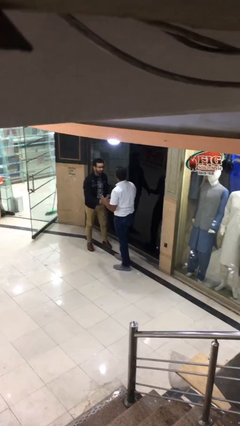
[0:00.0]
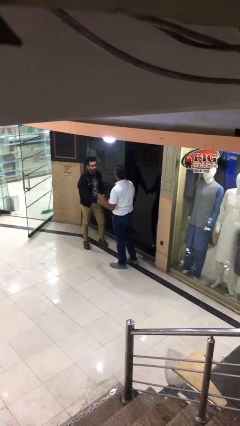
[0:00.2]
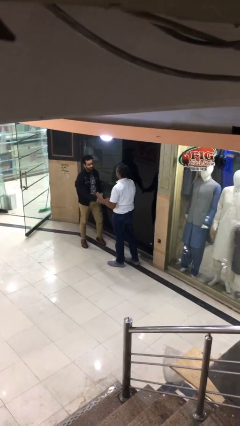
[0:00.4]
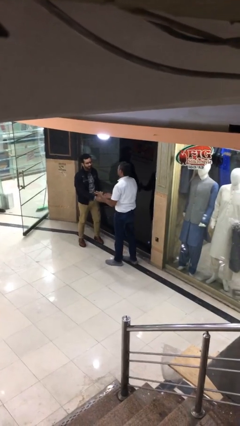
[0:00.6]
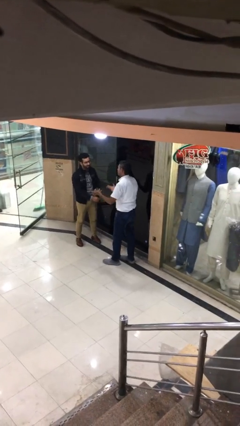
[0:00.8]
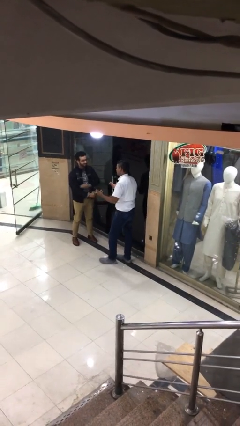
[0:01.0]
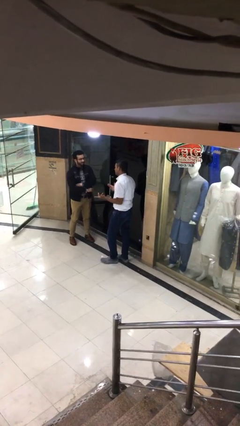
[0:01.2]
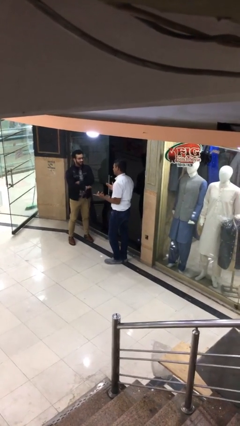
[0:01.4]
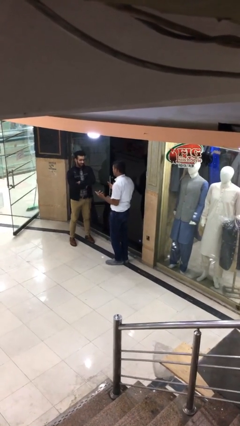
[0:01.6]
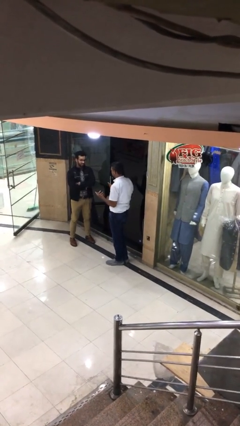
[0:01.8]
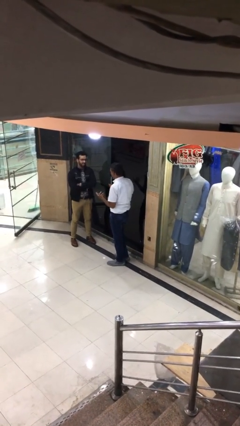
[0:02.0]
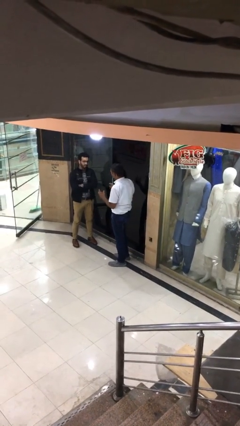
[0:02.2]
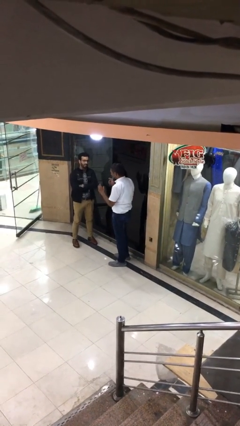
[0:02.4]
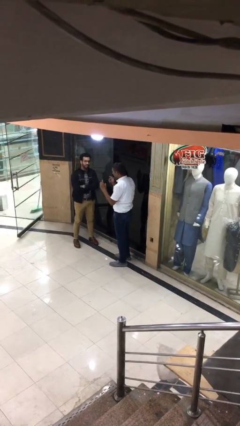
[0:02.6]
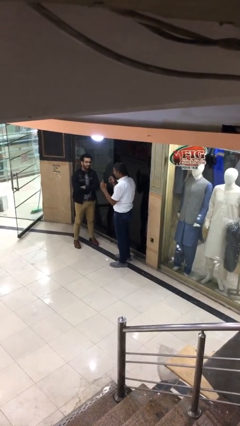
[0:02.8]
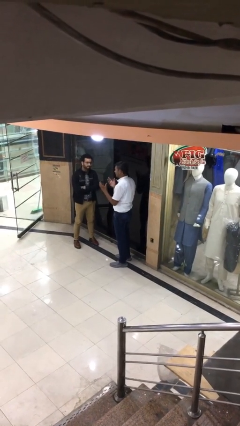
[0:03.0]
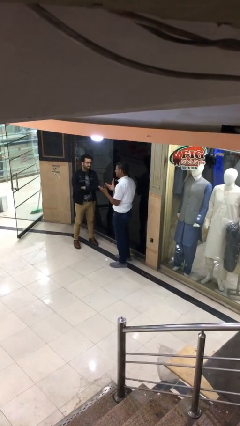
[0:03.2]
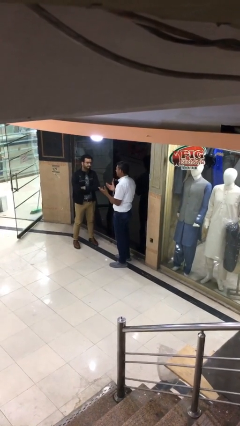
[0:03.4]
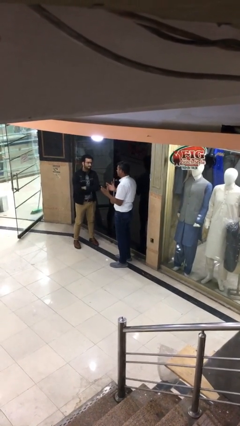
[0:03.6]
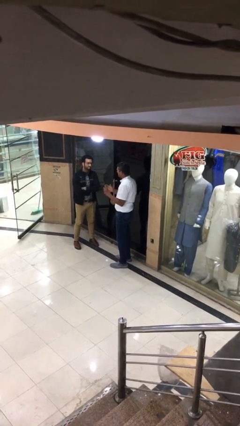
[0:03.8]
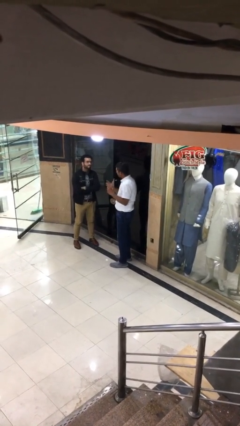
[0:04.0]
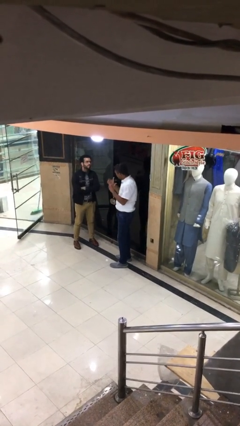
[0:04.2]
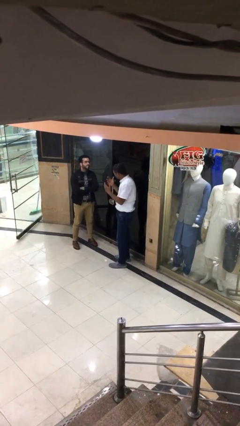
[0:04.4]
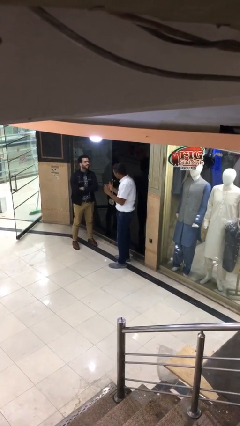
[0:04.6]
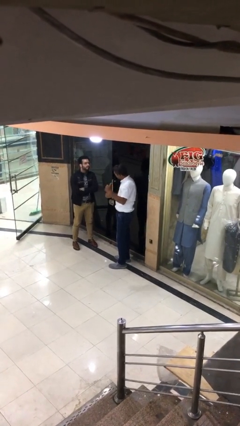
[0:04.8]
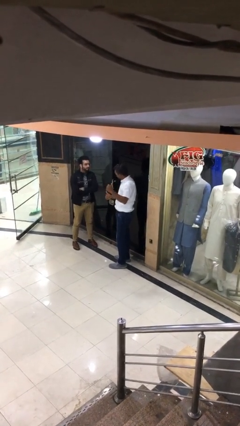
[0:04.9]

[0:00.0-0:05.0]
person talks to person

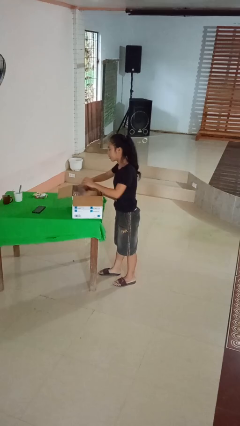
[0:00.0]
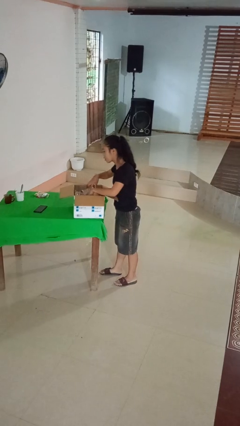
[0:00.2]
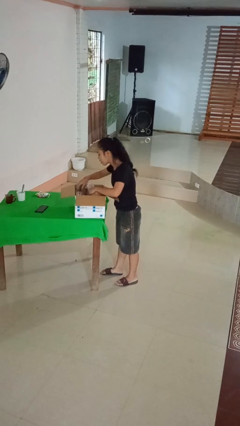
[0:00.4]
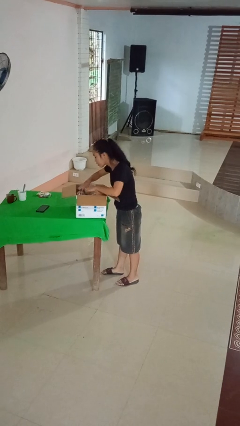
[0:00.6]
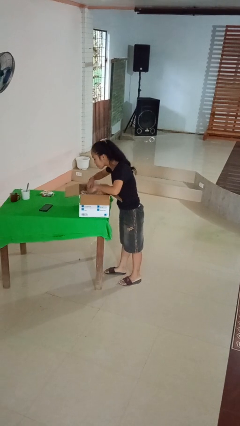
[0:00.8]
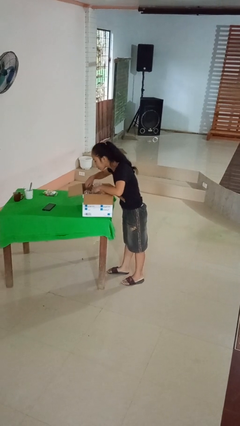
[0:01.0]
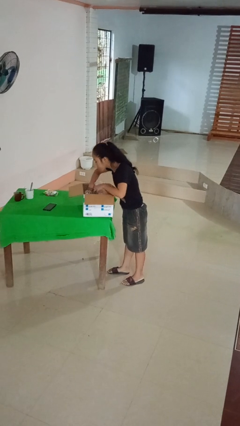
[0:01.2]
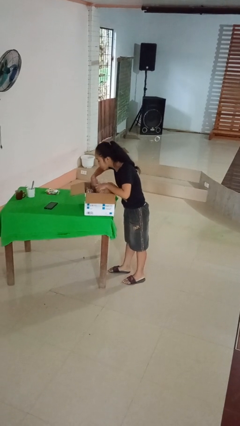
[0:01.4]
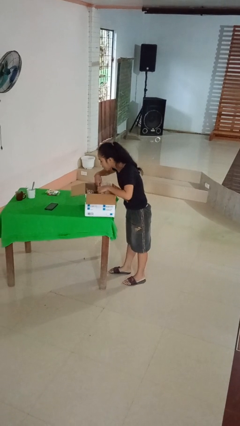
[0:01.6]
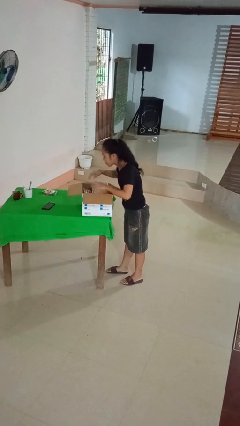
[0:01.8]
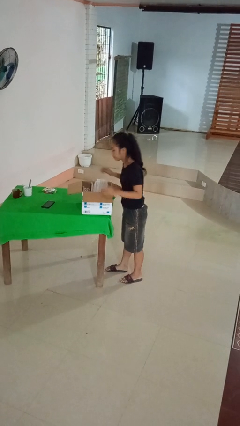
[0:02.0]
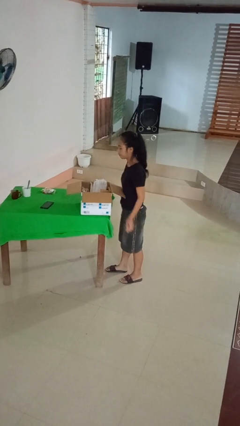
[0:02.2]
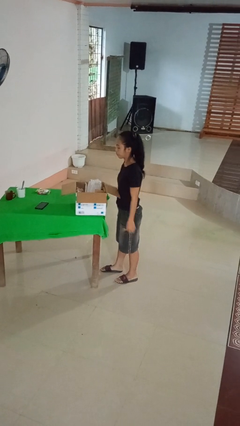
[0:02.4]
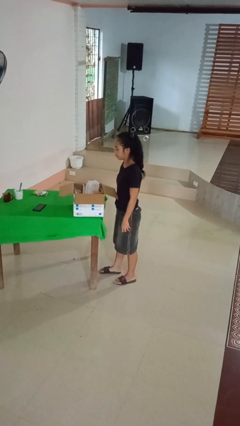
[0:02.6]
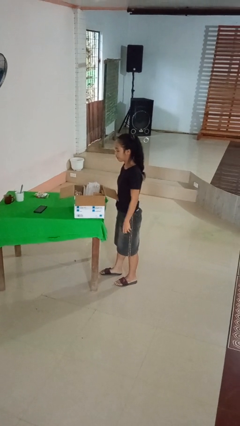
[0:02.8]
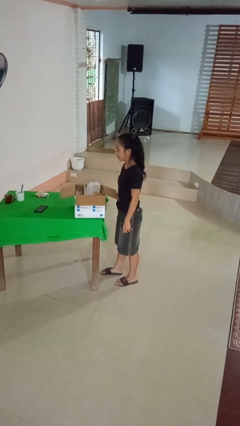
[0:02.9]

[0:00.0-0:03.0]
person searches in box

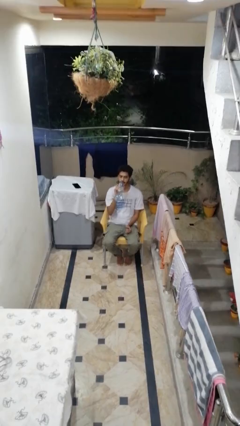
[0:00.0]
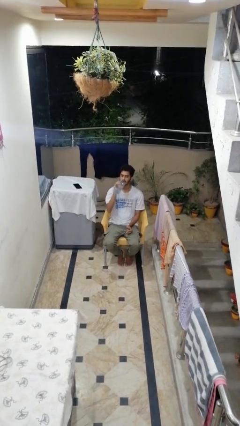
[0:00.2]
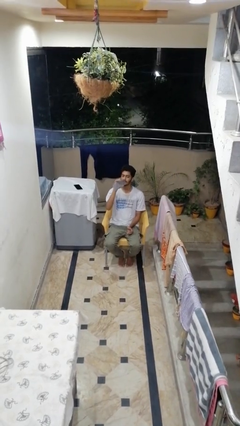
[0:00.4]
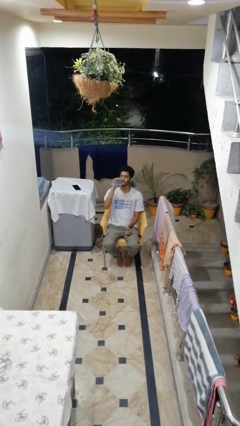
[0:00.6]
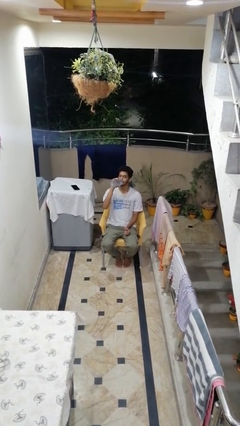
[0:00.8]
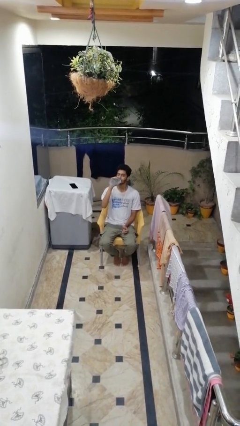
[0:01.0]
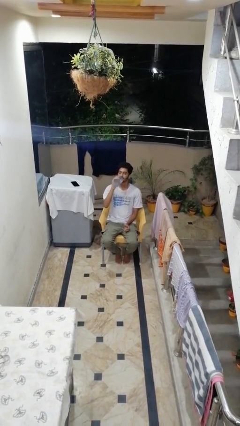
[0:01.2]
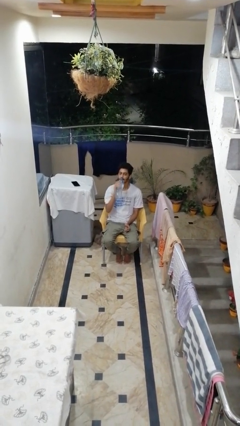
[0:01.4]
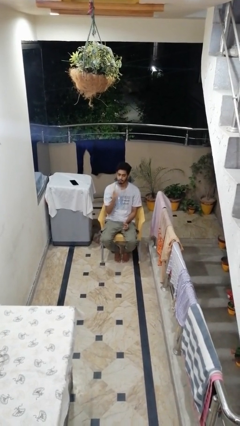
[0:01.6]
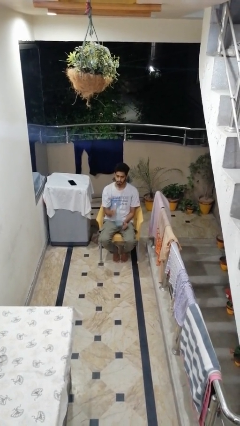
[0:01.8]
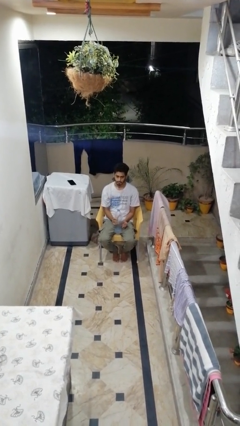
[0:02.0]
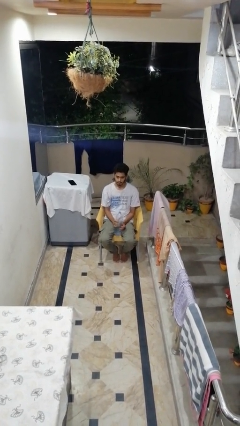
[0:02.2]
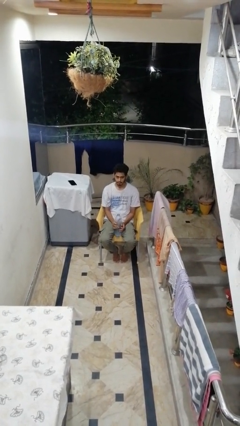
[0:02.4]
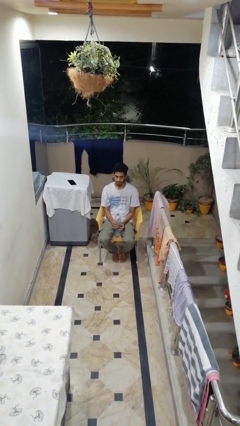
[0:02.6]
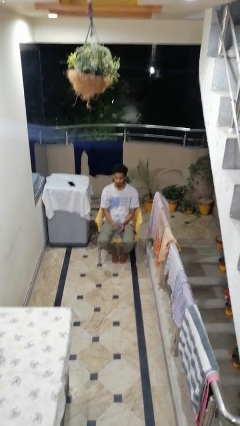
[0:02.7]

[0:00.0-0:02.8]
person drinks from bottle

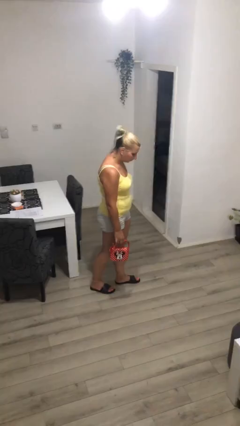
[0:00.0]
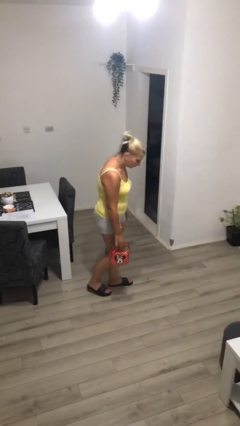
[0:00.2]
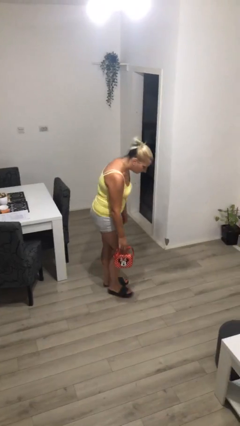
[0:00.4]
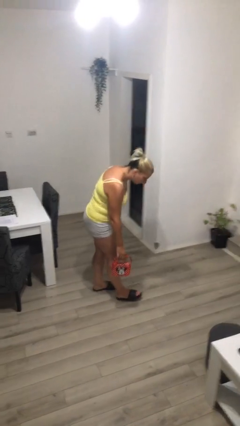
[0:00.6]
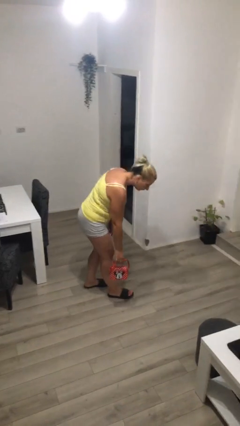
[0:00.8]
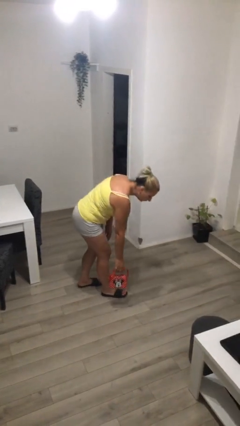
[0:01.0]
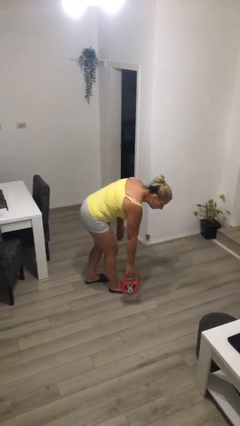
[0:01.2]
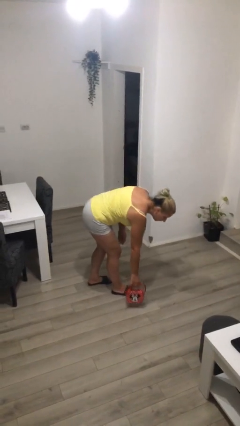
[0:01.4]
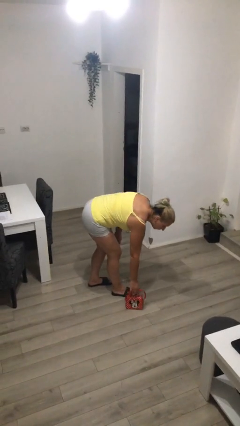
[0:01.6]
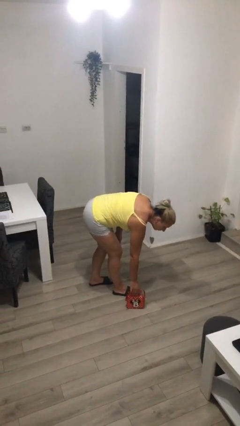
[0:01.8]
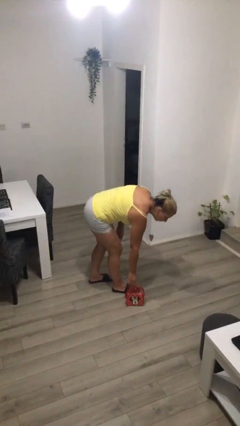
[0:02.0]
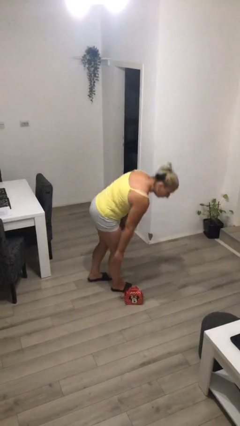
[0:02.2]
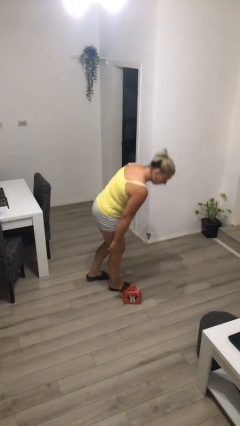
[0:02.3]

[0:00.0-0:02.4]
person puts down object on floor

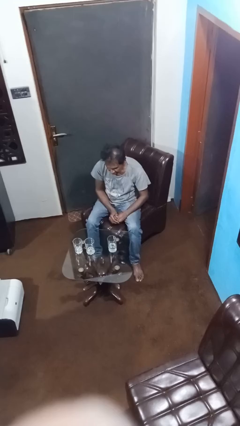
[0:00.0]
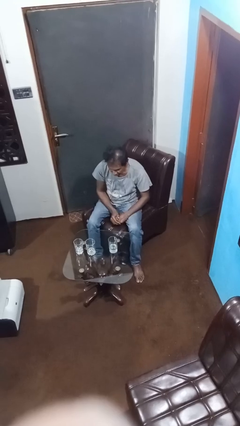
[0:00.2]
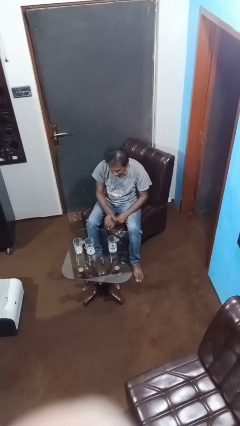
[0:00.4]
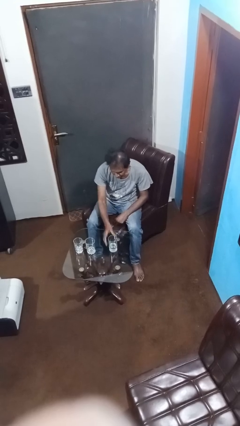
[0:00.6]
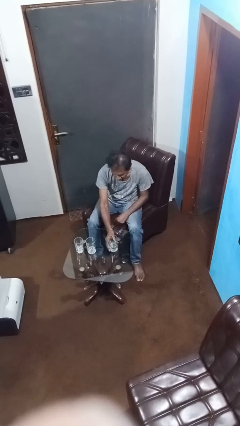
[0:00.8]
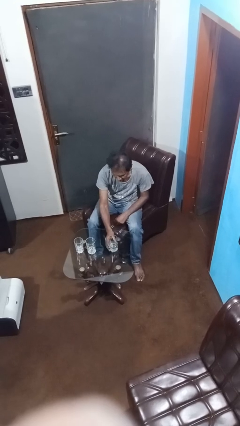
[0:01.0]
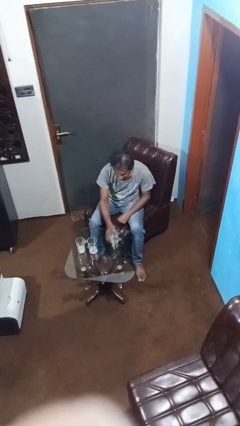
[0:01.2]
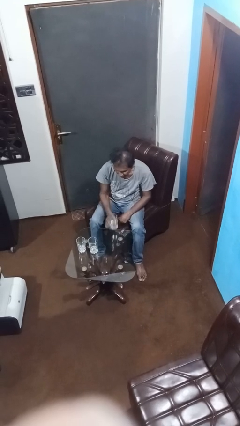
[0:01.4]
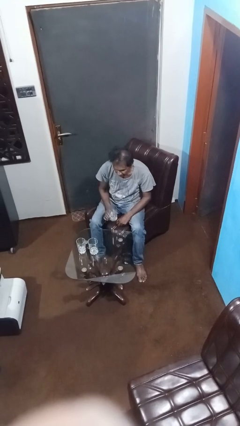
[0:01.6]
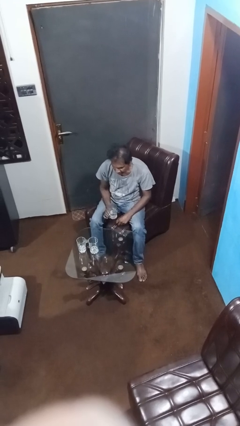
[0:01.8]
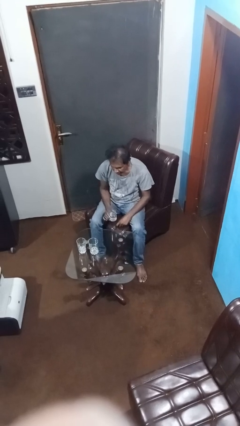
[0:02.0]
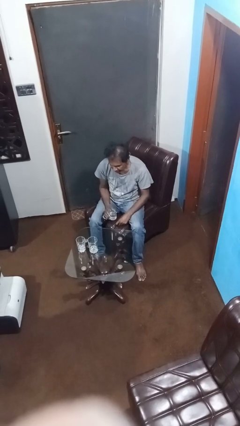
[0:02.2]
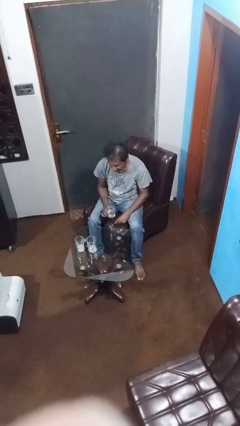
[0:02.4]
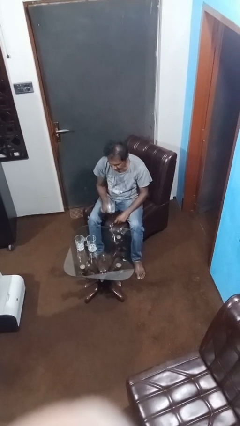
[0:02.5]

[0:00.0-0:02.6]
person picks up object from table

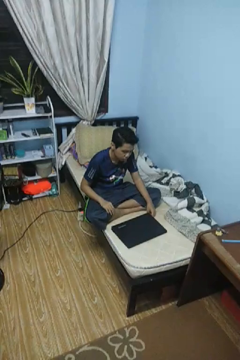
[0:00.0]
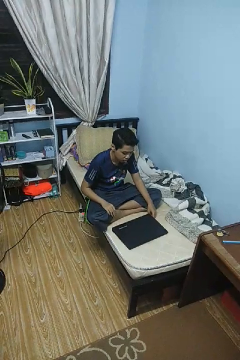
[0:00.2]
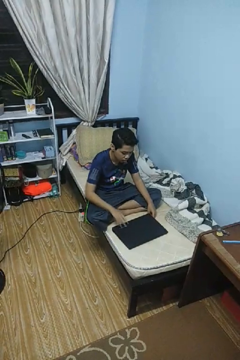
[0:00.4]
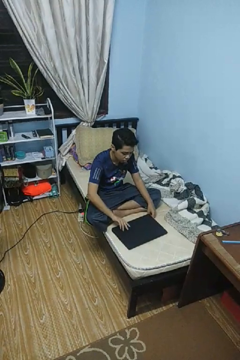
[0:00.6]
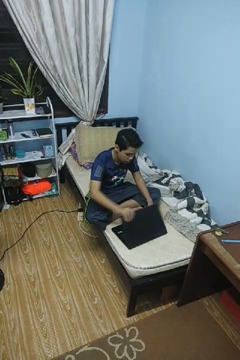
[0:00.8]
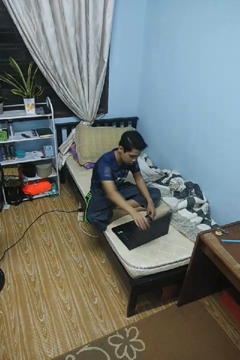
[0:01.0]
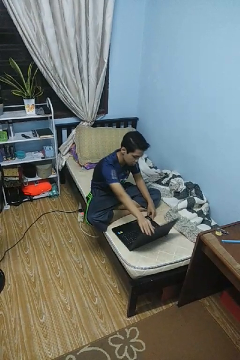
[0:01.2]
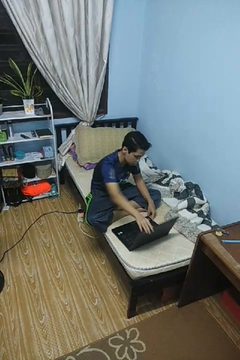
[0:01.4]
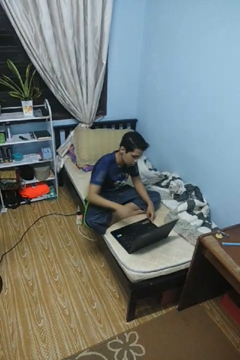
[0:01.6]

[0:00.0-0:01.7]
person opens laptop
